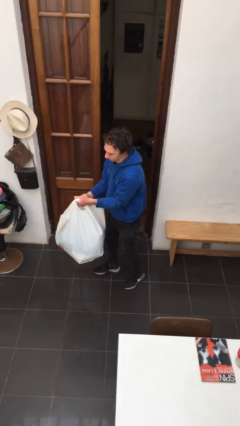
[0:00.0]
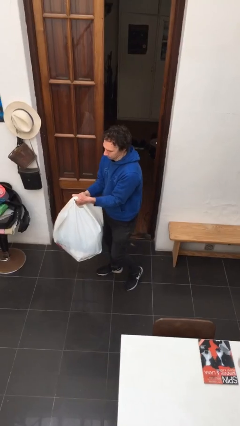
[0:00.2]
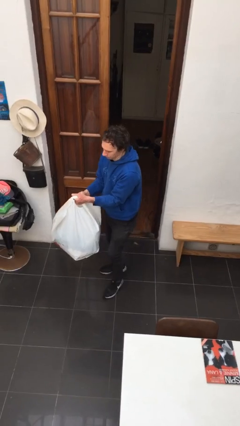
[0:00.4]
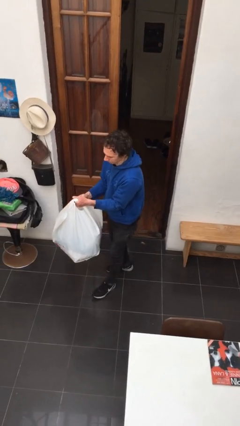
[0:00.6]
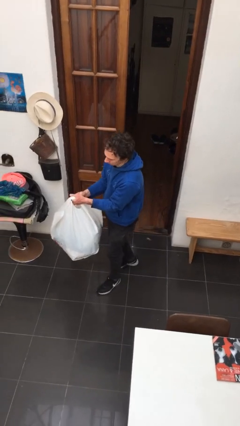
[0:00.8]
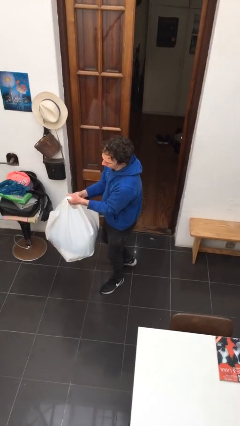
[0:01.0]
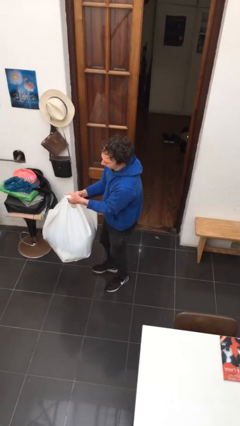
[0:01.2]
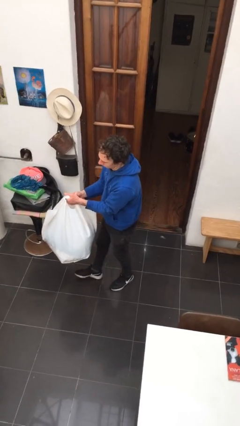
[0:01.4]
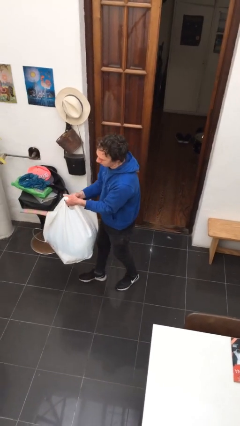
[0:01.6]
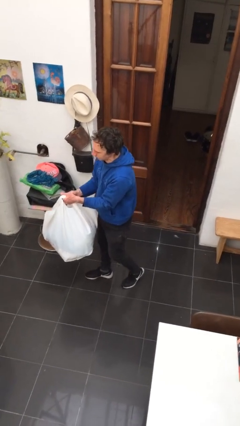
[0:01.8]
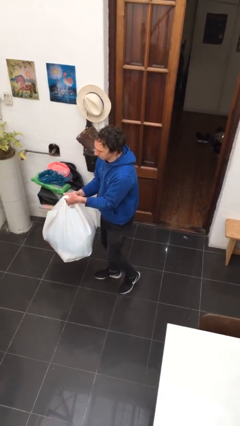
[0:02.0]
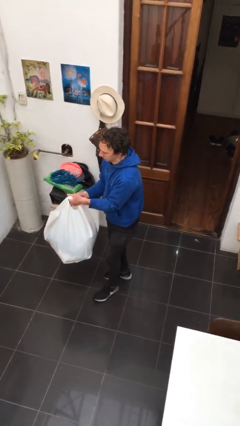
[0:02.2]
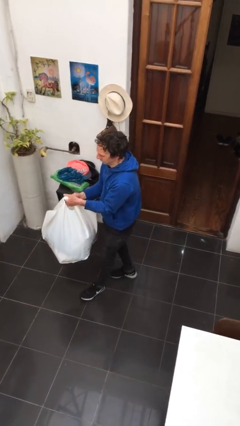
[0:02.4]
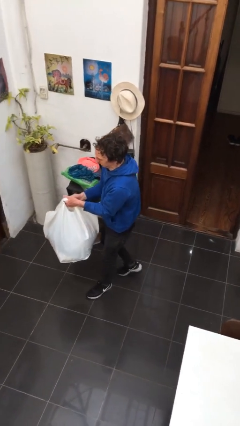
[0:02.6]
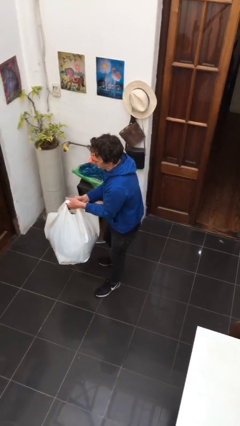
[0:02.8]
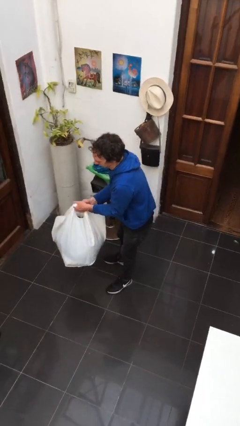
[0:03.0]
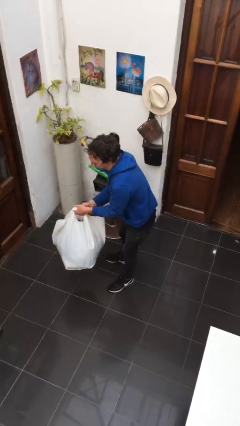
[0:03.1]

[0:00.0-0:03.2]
person carries heavy object

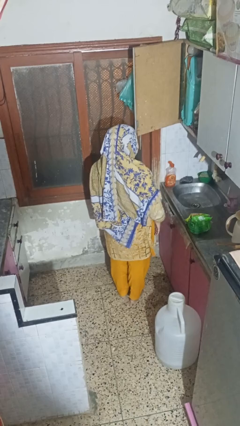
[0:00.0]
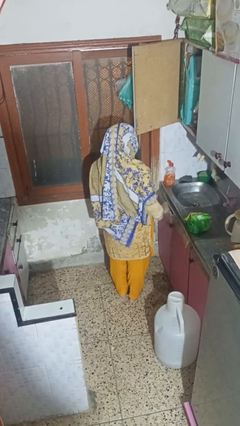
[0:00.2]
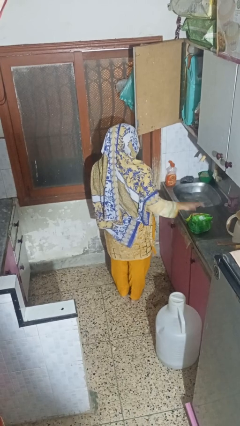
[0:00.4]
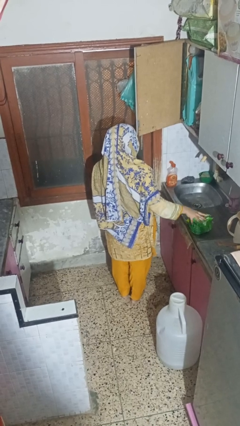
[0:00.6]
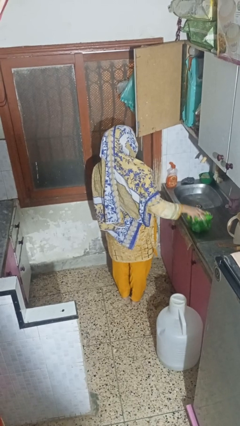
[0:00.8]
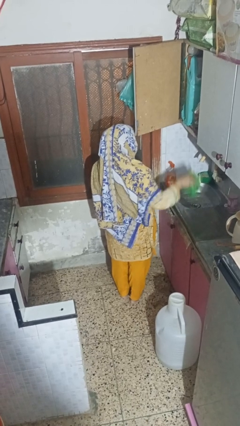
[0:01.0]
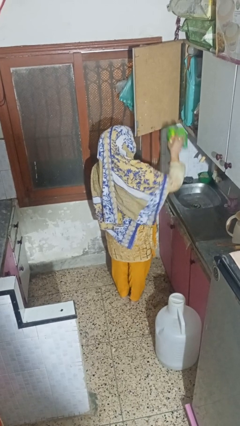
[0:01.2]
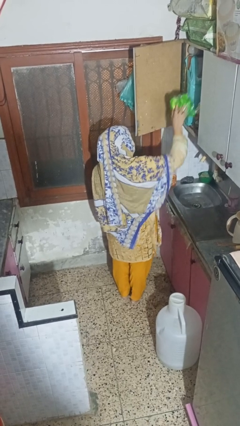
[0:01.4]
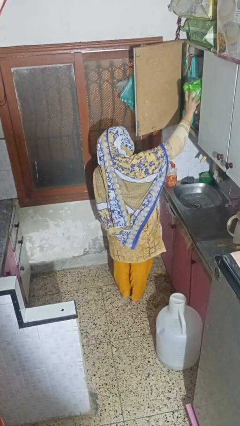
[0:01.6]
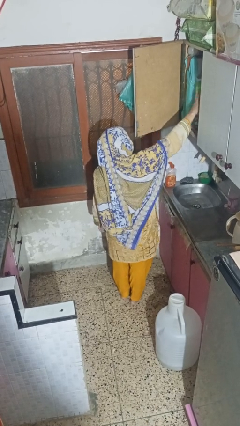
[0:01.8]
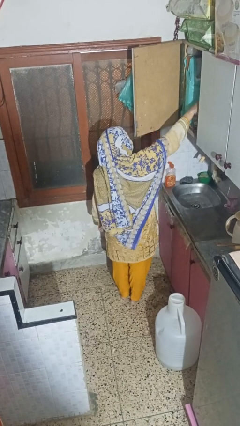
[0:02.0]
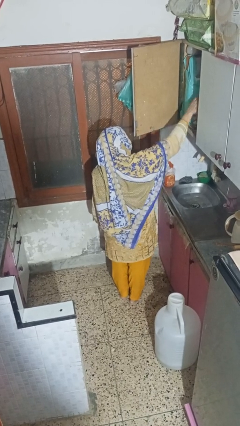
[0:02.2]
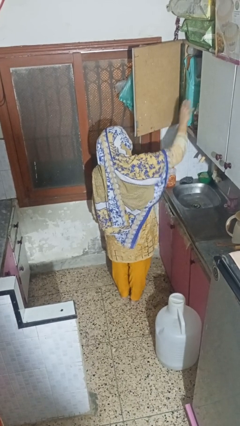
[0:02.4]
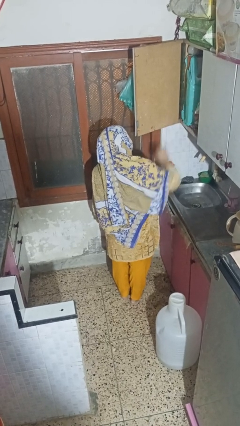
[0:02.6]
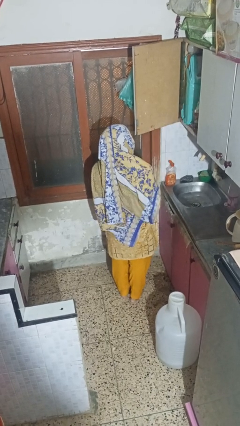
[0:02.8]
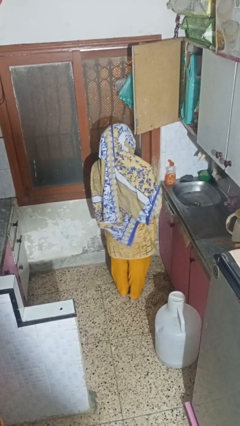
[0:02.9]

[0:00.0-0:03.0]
person puts object in cabinet

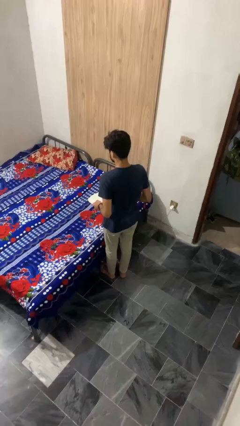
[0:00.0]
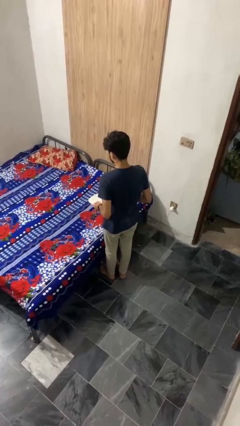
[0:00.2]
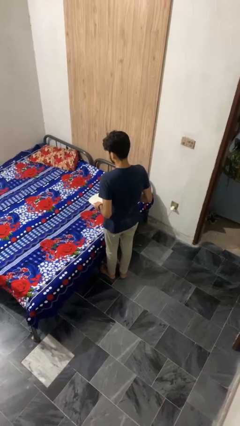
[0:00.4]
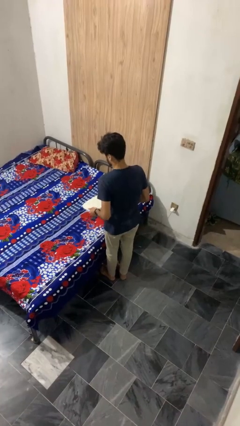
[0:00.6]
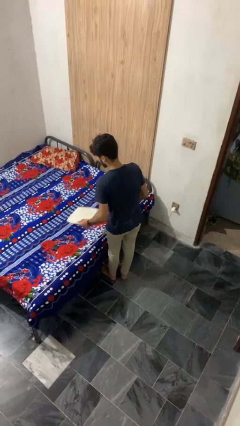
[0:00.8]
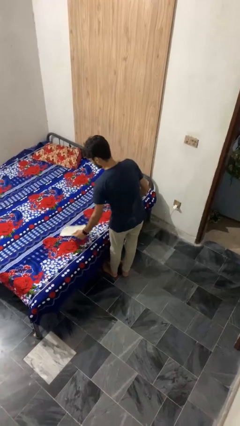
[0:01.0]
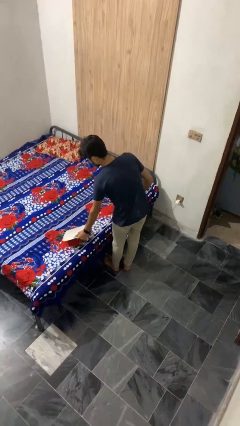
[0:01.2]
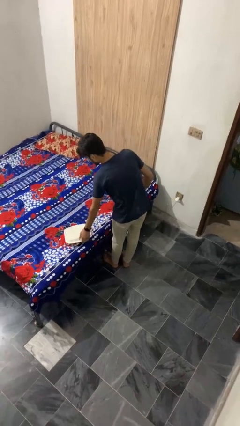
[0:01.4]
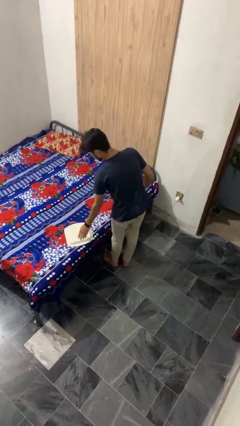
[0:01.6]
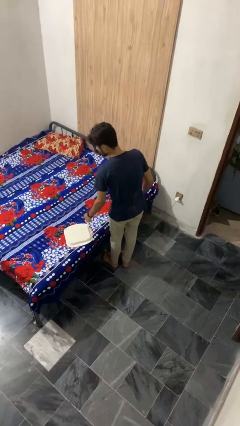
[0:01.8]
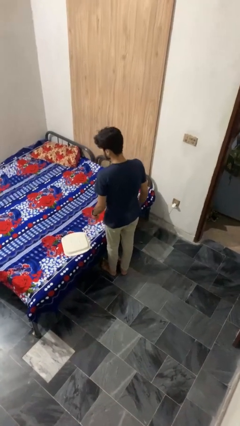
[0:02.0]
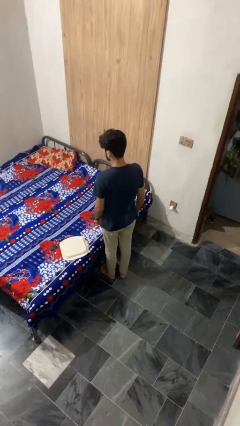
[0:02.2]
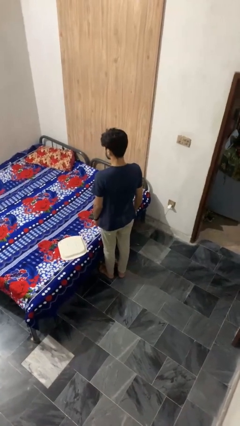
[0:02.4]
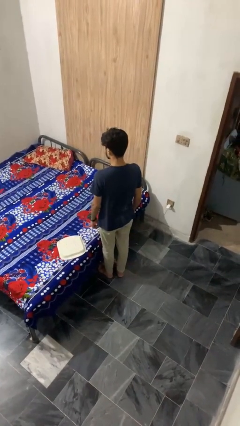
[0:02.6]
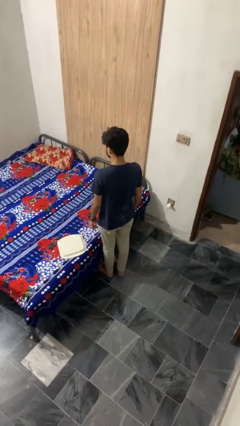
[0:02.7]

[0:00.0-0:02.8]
person puts down object on bed

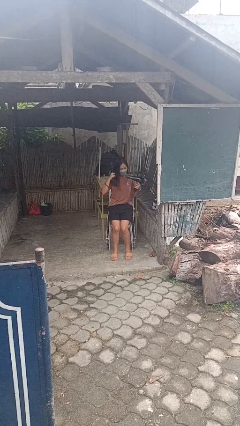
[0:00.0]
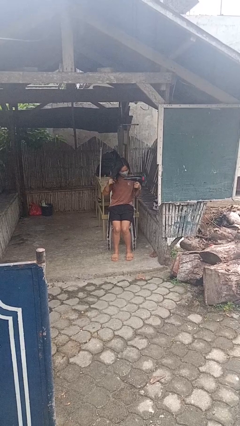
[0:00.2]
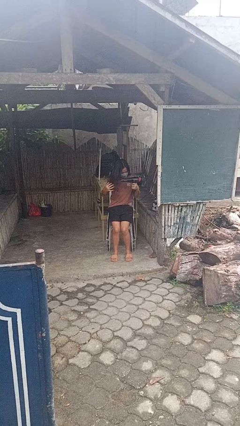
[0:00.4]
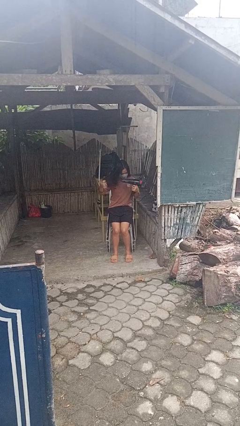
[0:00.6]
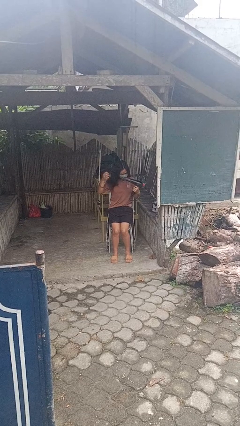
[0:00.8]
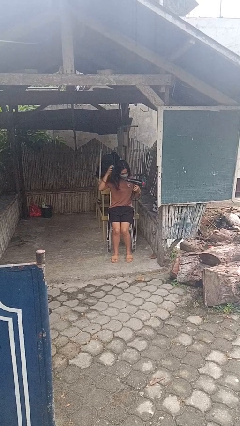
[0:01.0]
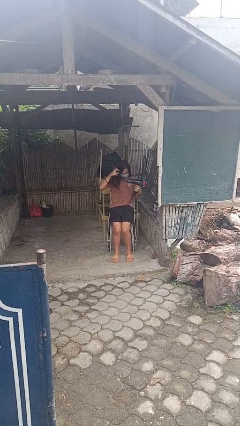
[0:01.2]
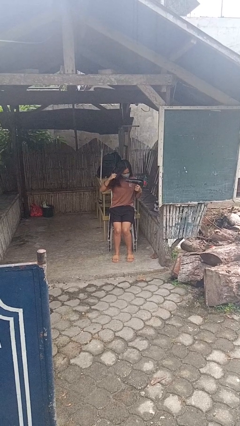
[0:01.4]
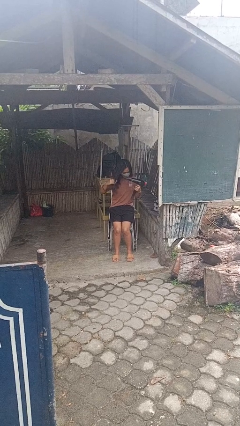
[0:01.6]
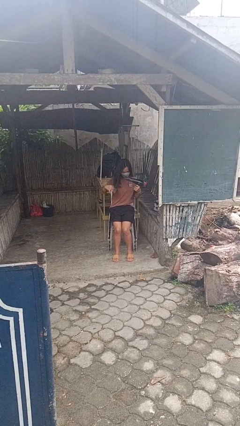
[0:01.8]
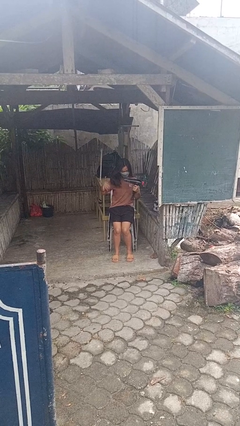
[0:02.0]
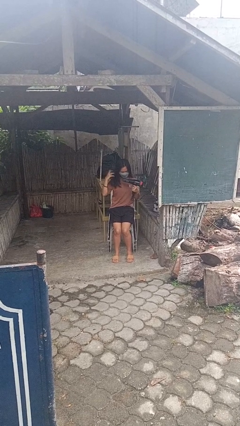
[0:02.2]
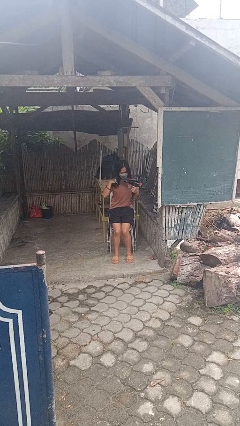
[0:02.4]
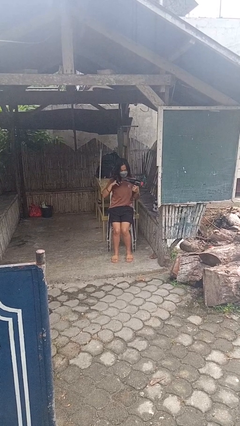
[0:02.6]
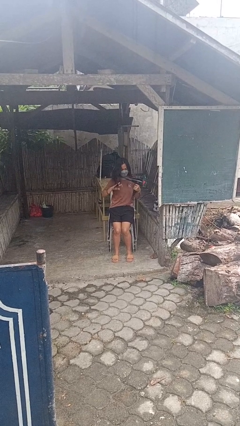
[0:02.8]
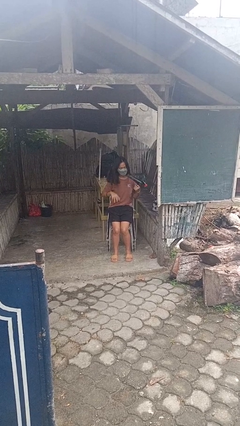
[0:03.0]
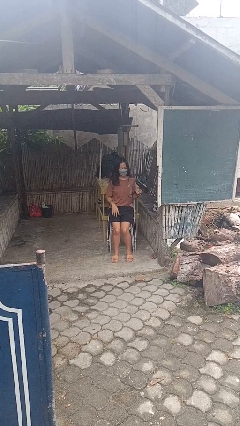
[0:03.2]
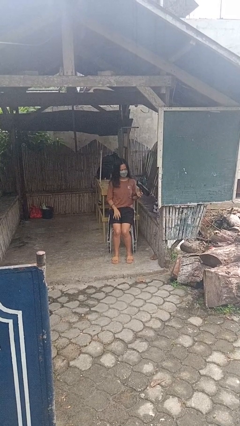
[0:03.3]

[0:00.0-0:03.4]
person dries hair with hairdryer

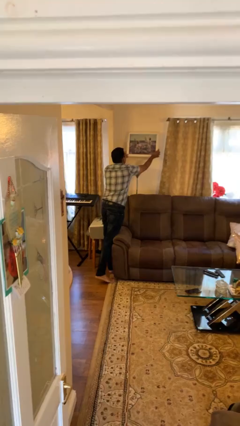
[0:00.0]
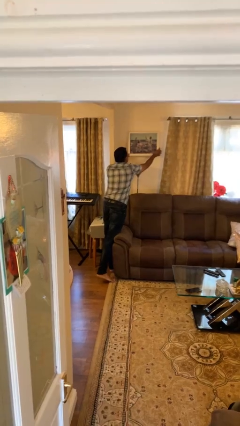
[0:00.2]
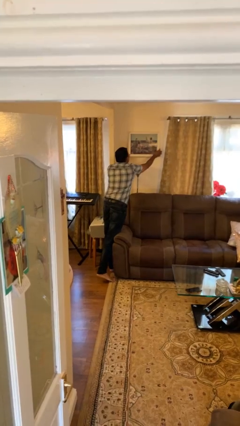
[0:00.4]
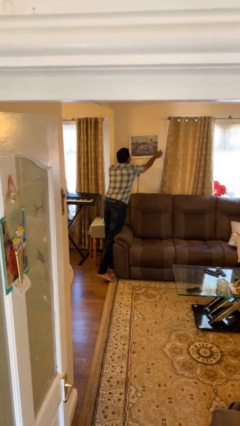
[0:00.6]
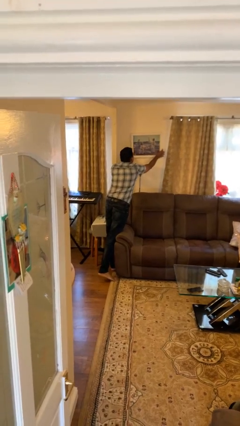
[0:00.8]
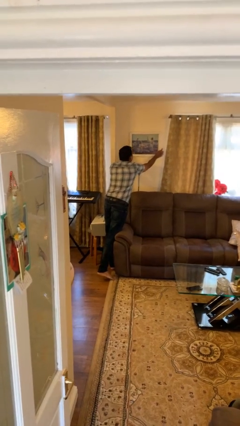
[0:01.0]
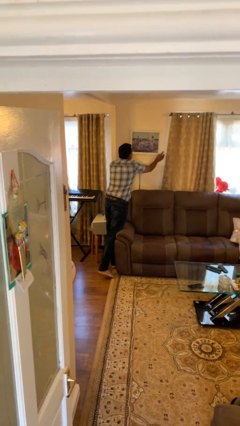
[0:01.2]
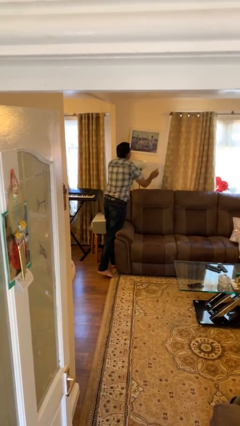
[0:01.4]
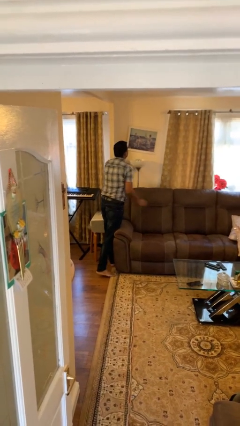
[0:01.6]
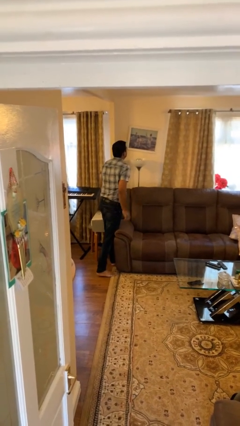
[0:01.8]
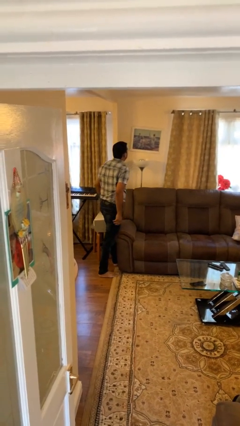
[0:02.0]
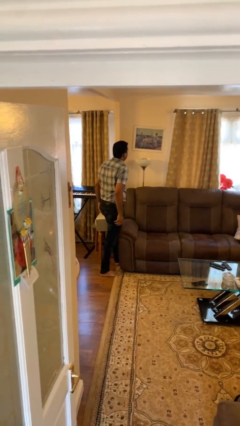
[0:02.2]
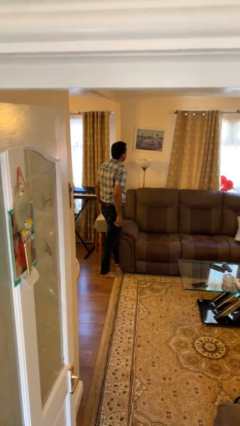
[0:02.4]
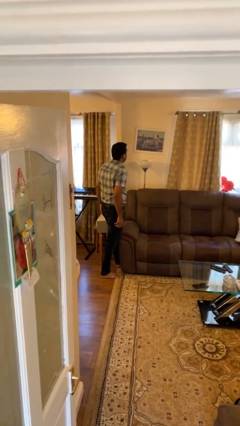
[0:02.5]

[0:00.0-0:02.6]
person puts up picture frame

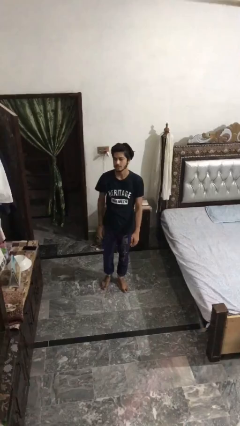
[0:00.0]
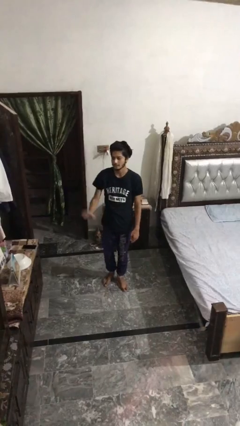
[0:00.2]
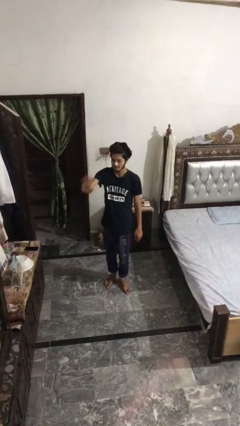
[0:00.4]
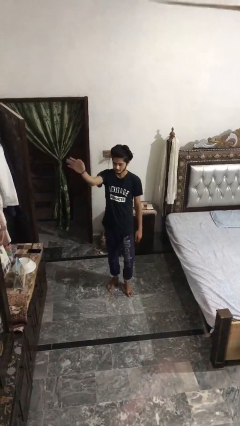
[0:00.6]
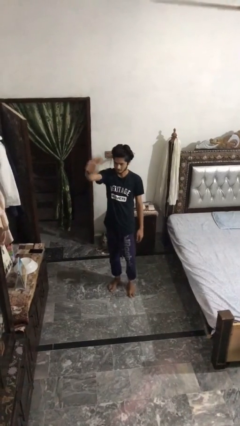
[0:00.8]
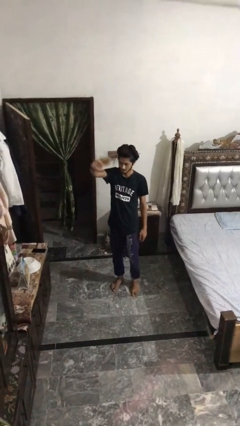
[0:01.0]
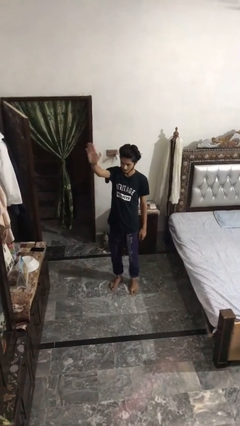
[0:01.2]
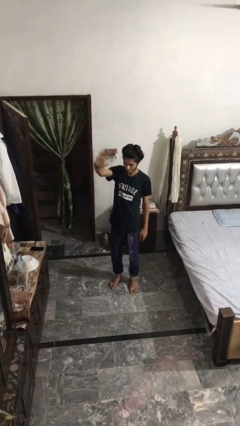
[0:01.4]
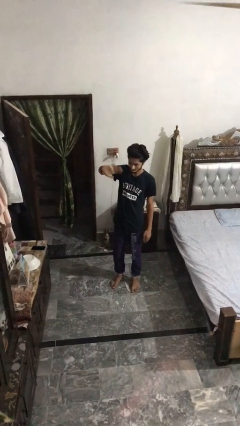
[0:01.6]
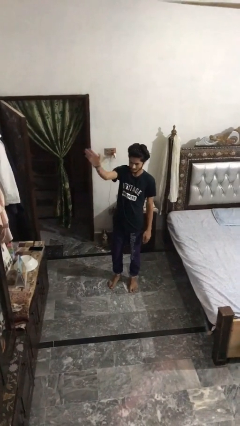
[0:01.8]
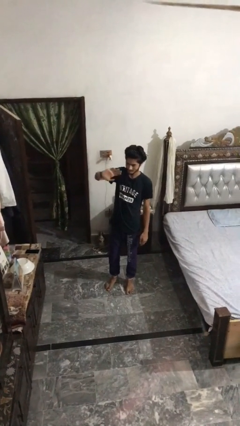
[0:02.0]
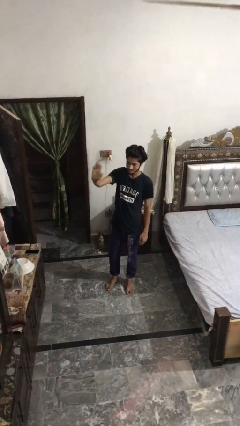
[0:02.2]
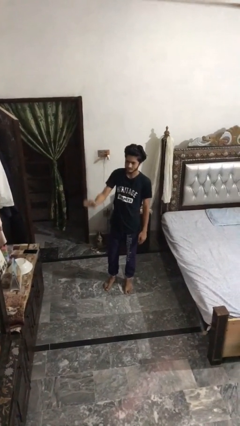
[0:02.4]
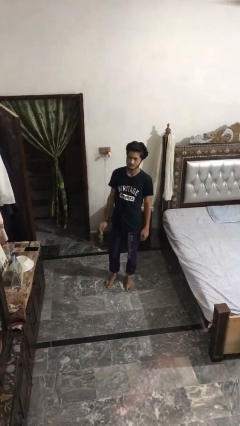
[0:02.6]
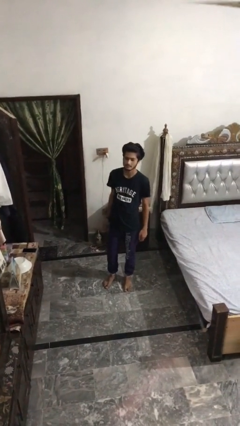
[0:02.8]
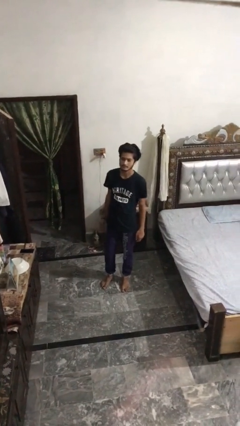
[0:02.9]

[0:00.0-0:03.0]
person waves at person
